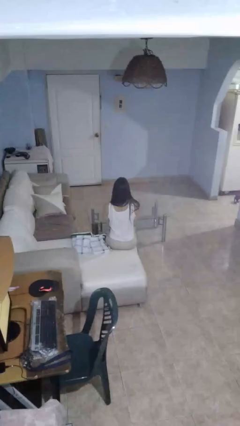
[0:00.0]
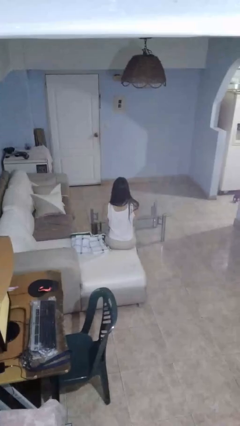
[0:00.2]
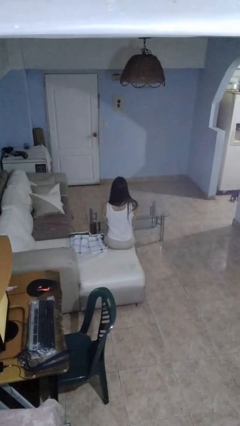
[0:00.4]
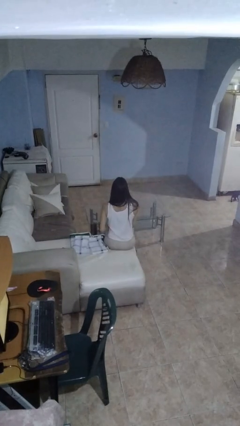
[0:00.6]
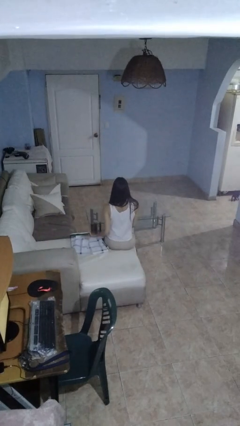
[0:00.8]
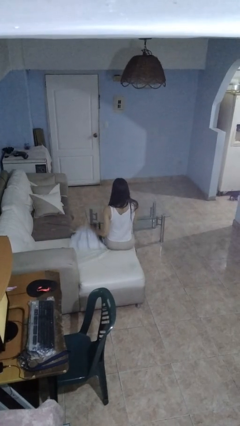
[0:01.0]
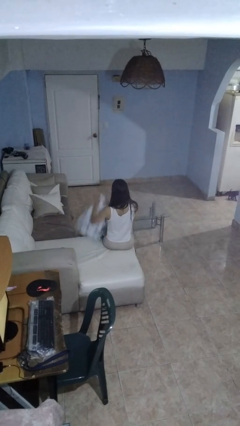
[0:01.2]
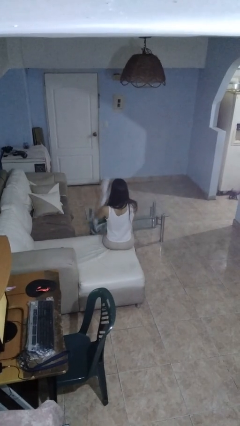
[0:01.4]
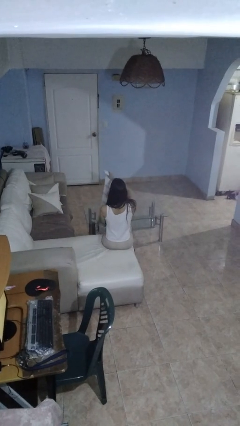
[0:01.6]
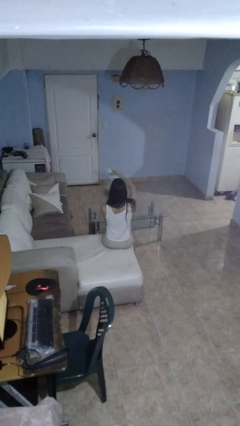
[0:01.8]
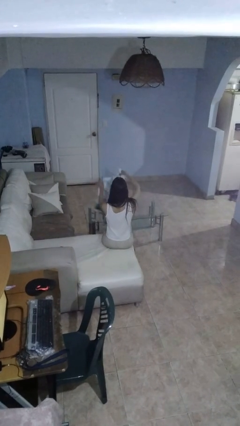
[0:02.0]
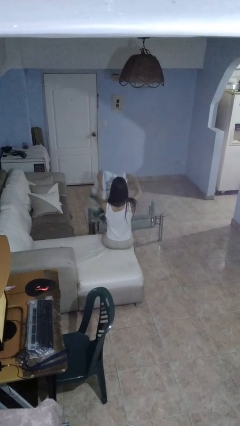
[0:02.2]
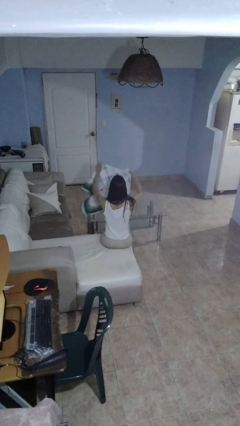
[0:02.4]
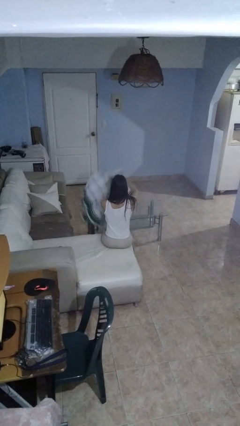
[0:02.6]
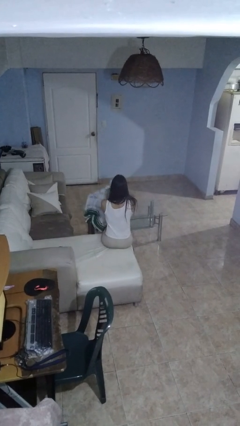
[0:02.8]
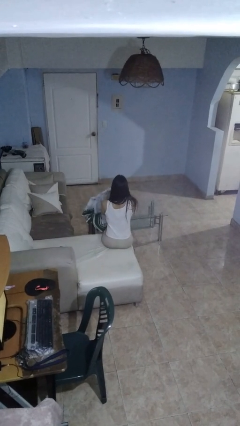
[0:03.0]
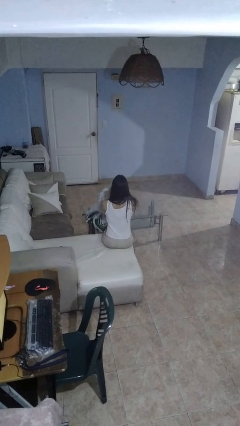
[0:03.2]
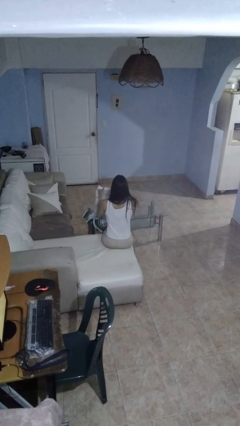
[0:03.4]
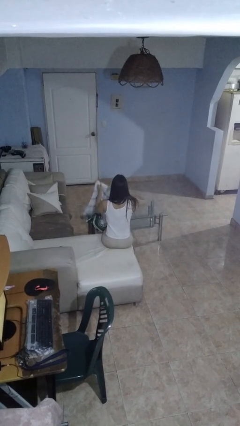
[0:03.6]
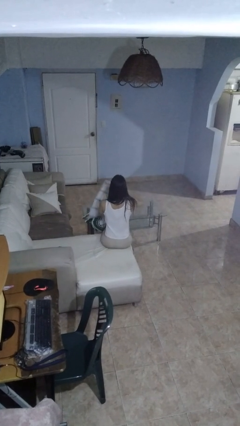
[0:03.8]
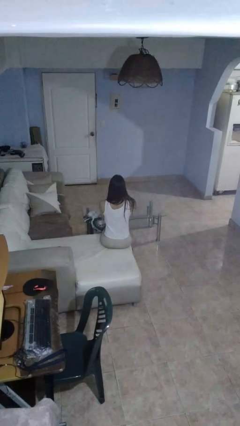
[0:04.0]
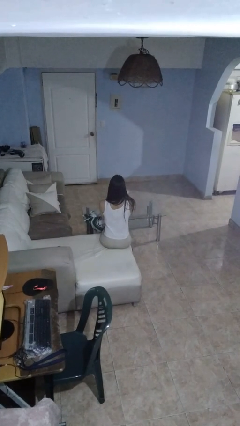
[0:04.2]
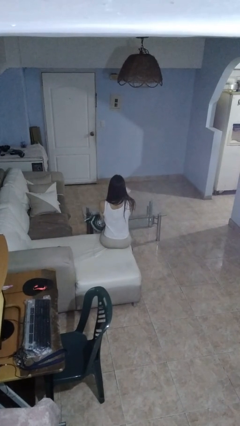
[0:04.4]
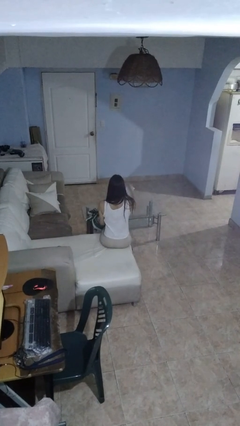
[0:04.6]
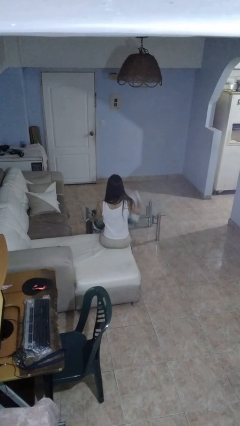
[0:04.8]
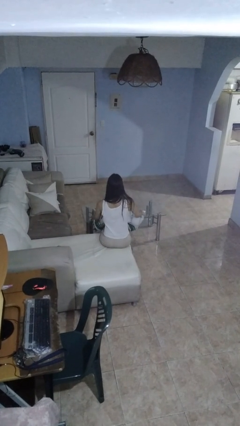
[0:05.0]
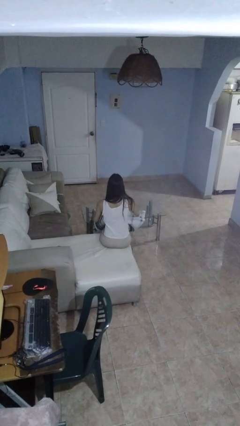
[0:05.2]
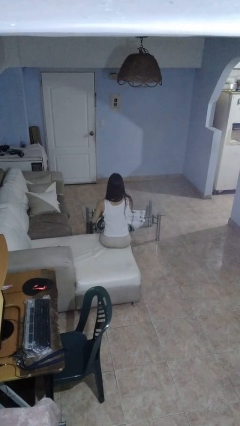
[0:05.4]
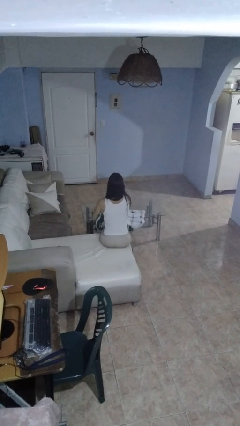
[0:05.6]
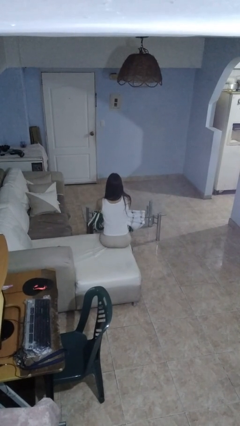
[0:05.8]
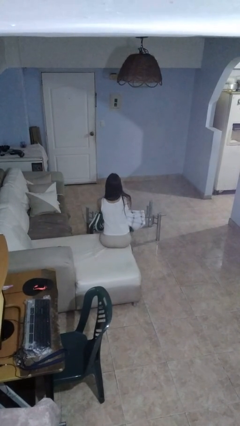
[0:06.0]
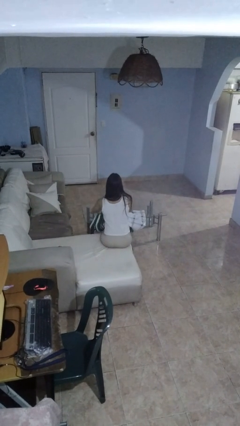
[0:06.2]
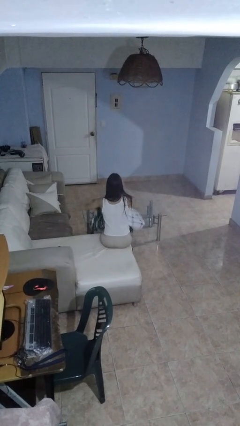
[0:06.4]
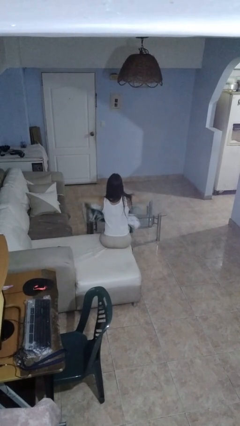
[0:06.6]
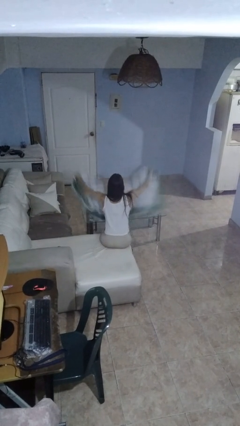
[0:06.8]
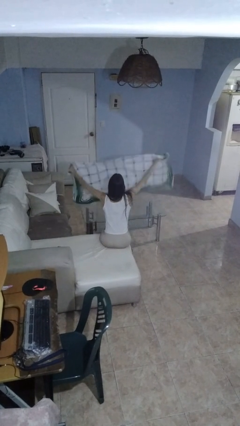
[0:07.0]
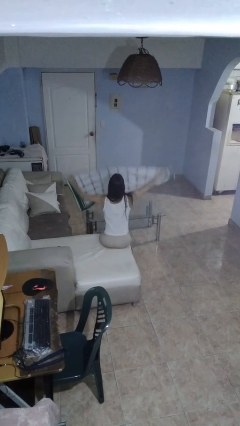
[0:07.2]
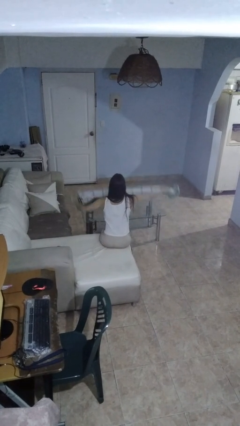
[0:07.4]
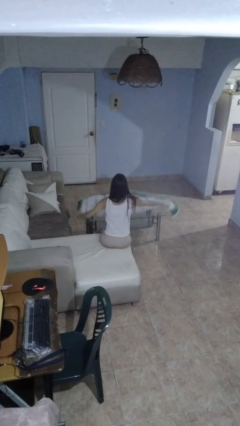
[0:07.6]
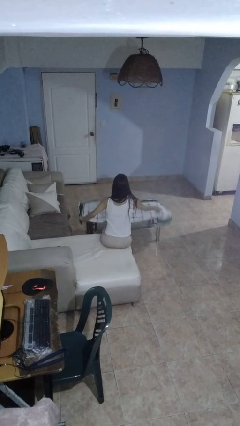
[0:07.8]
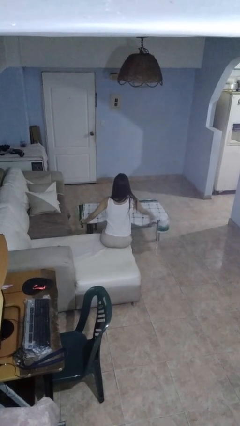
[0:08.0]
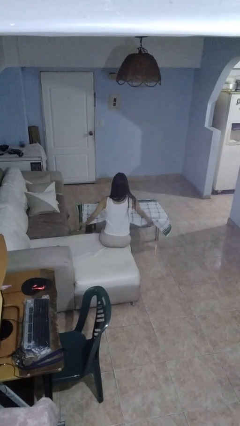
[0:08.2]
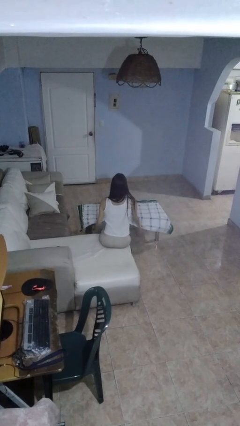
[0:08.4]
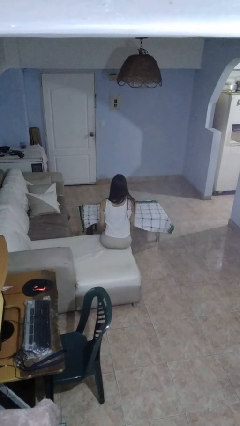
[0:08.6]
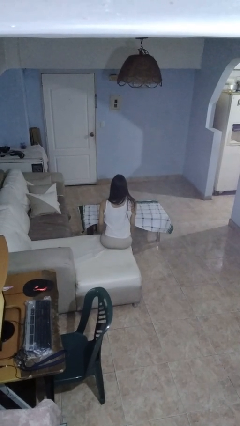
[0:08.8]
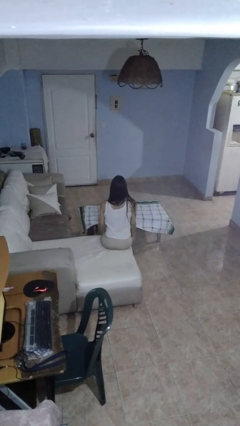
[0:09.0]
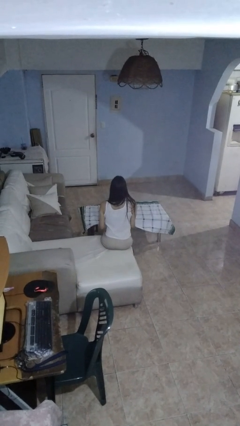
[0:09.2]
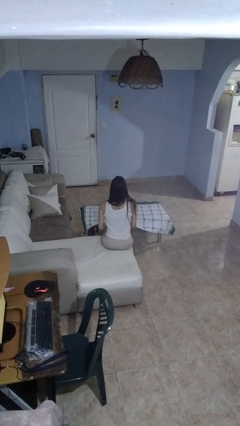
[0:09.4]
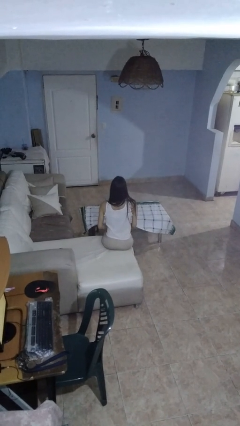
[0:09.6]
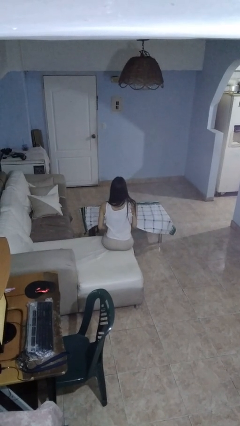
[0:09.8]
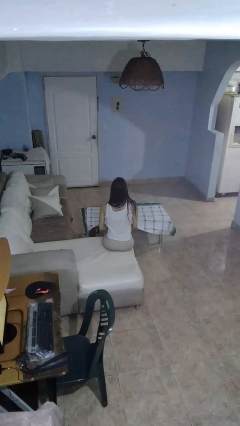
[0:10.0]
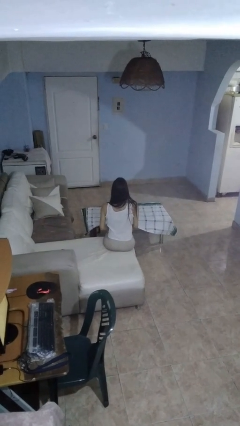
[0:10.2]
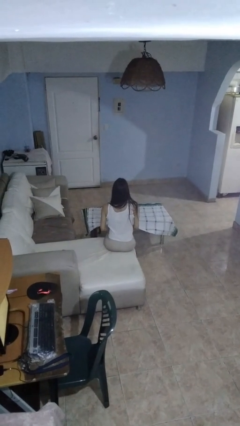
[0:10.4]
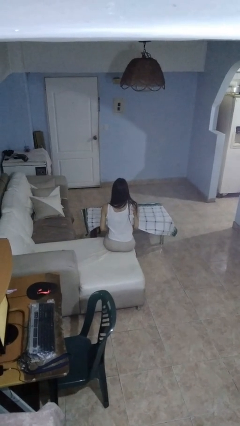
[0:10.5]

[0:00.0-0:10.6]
person spreads tablecloth

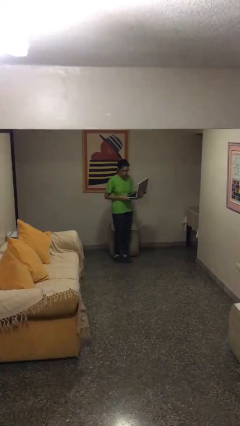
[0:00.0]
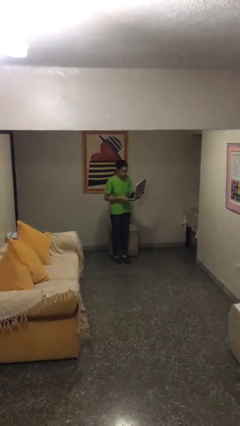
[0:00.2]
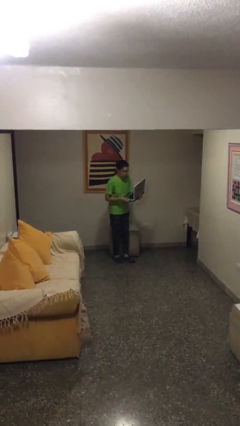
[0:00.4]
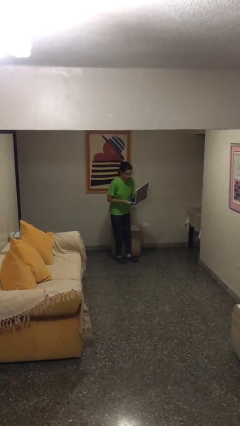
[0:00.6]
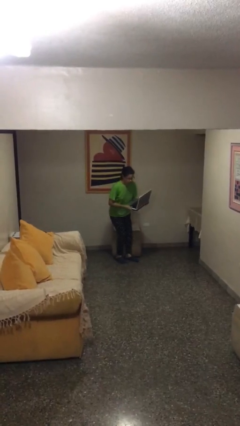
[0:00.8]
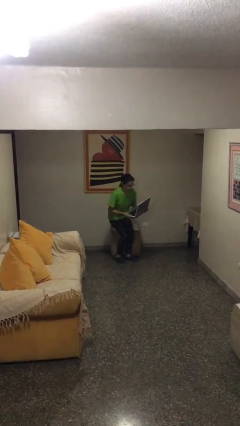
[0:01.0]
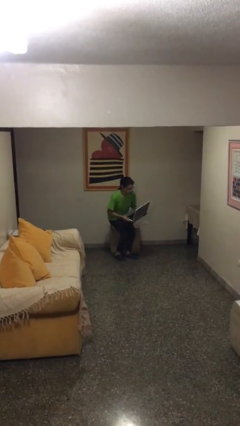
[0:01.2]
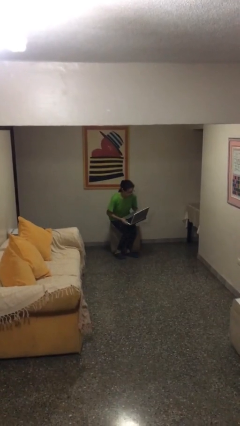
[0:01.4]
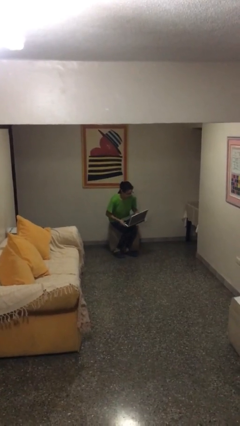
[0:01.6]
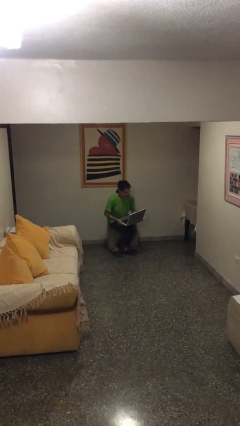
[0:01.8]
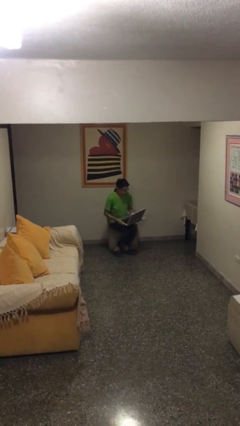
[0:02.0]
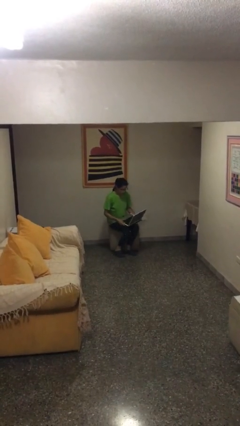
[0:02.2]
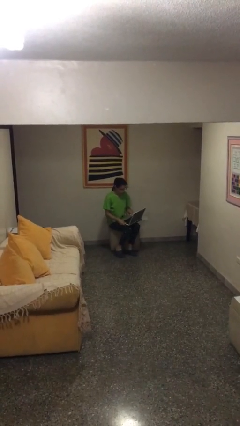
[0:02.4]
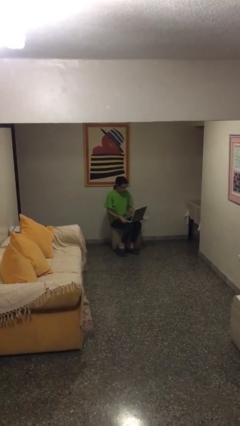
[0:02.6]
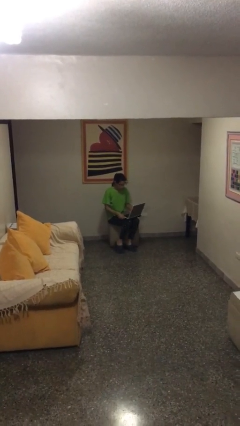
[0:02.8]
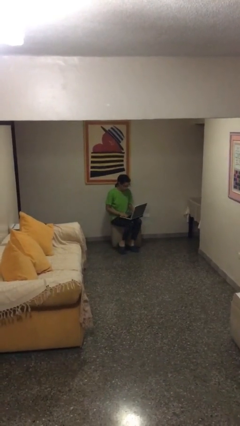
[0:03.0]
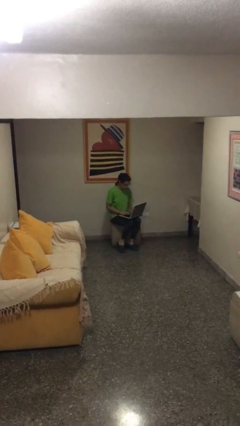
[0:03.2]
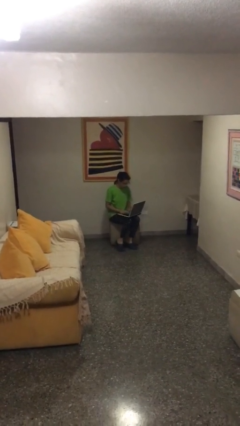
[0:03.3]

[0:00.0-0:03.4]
person sits down

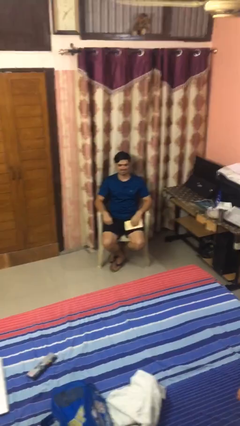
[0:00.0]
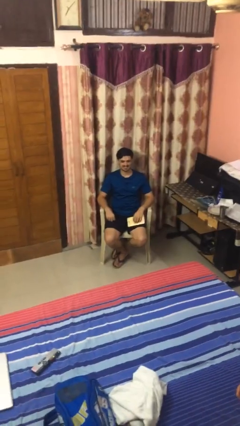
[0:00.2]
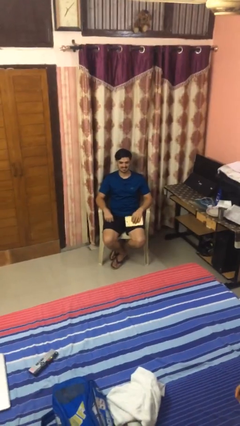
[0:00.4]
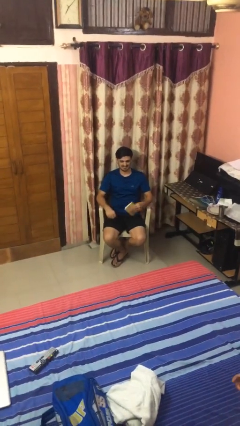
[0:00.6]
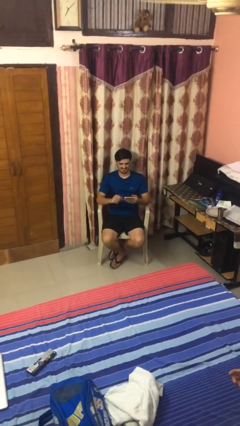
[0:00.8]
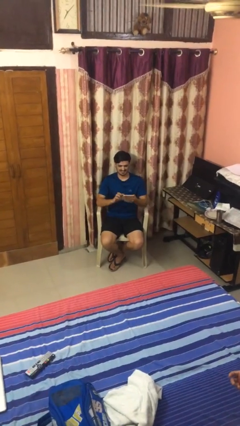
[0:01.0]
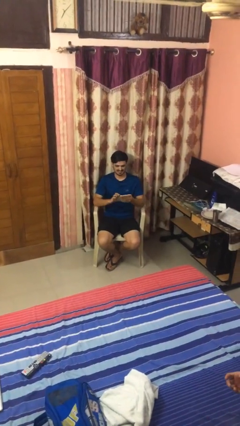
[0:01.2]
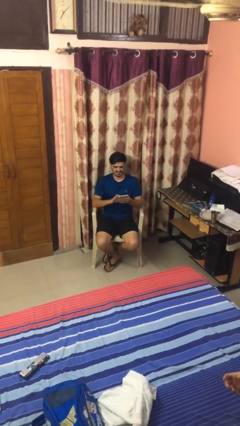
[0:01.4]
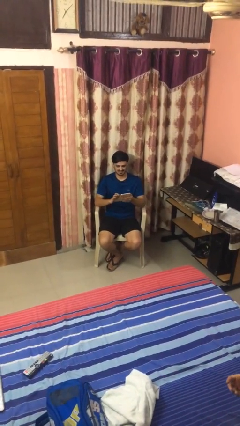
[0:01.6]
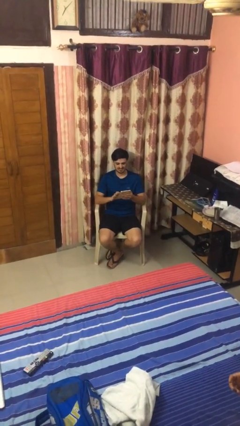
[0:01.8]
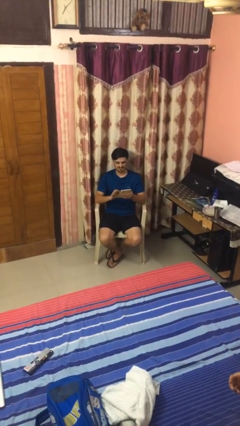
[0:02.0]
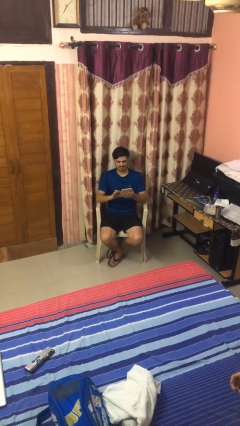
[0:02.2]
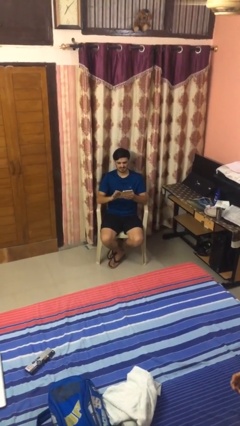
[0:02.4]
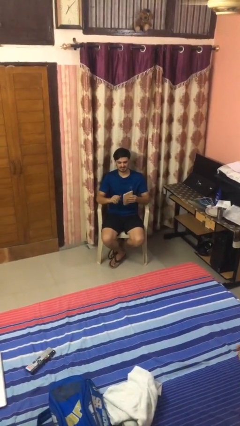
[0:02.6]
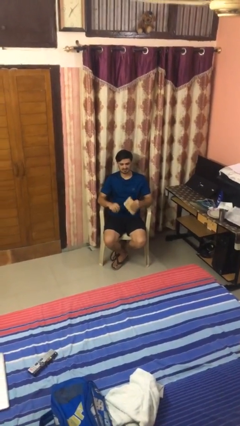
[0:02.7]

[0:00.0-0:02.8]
person interacts with tablet

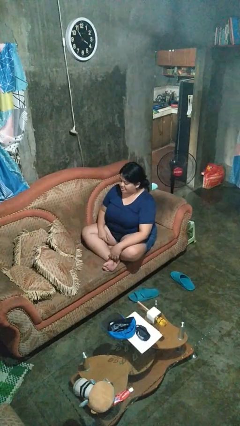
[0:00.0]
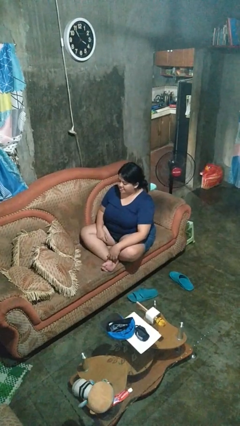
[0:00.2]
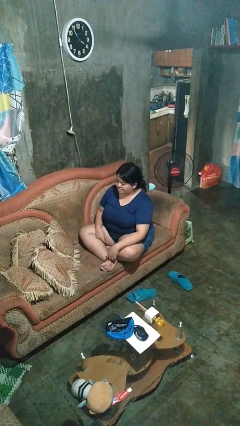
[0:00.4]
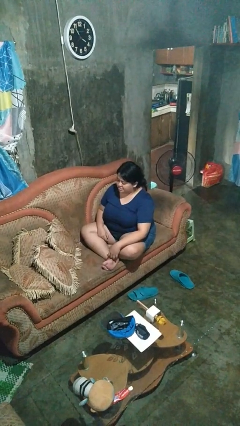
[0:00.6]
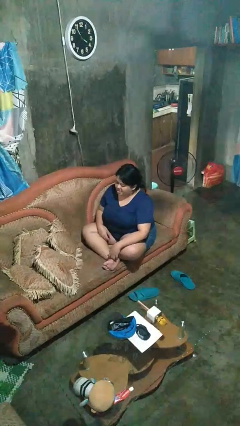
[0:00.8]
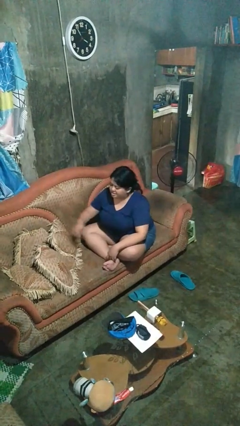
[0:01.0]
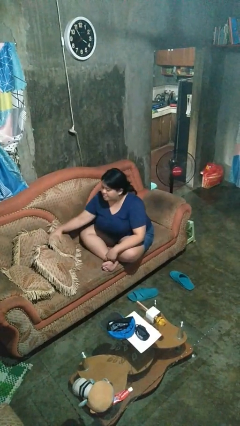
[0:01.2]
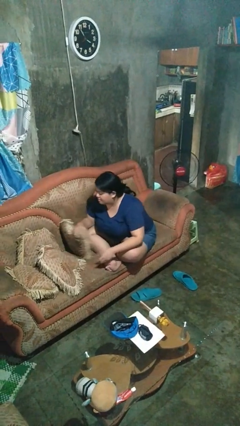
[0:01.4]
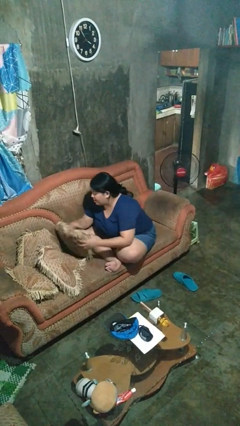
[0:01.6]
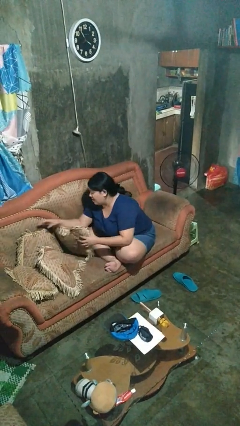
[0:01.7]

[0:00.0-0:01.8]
person searches in couch
